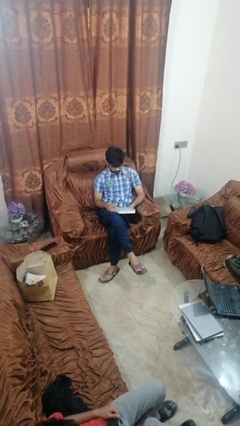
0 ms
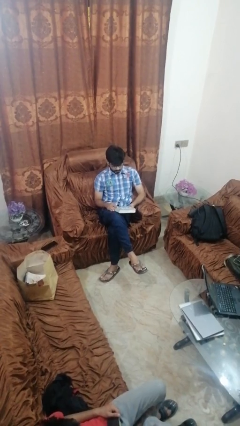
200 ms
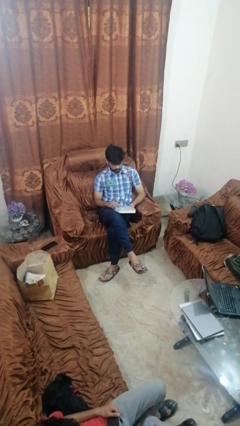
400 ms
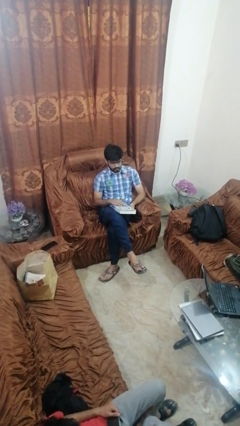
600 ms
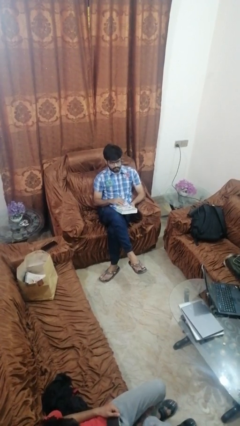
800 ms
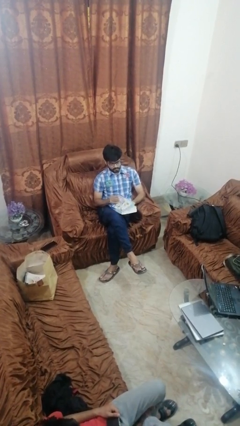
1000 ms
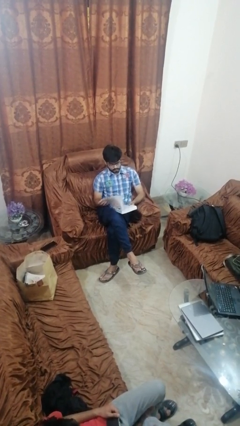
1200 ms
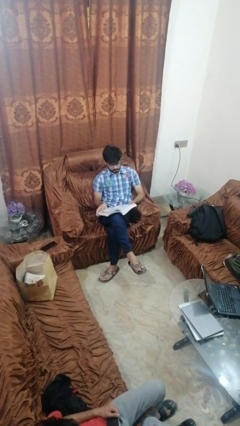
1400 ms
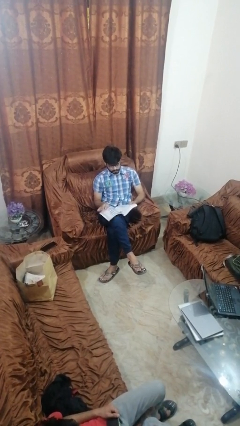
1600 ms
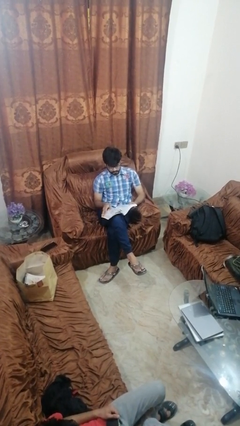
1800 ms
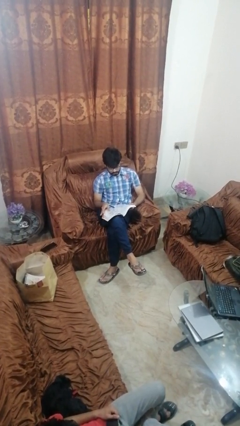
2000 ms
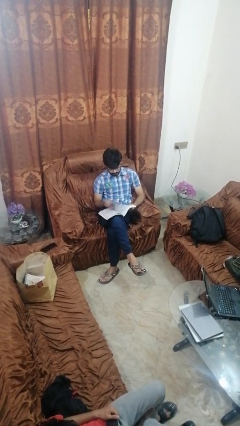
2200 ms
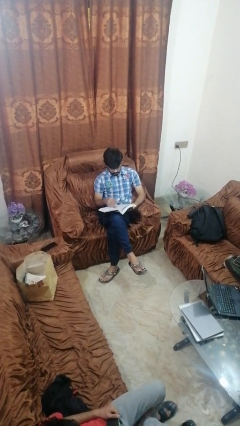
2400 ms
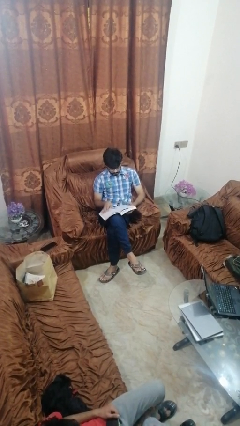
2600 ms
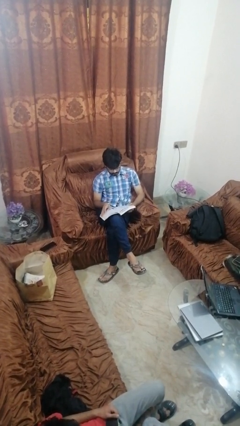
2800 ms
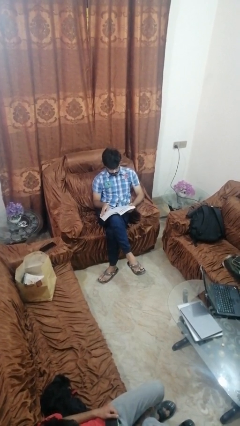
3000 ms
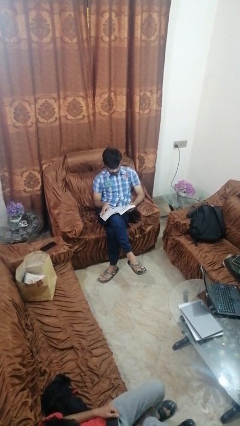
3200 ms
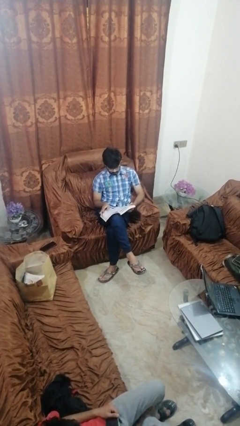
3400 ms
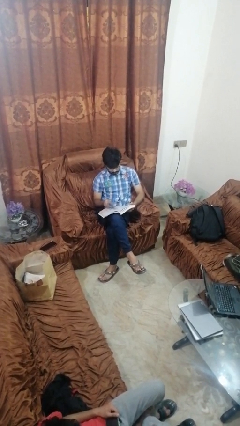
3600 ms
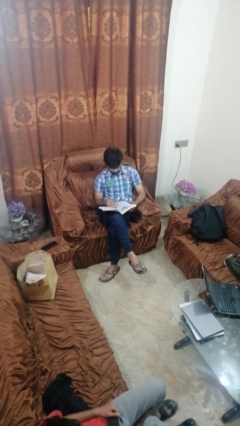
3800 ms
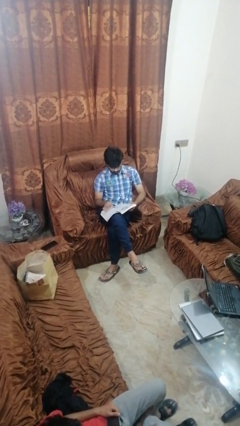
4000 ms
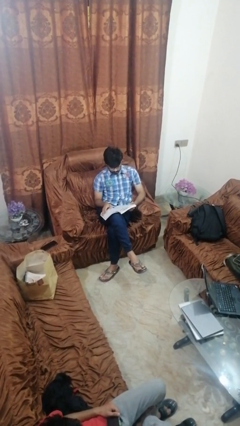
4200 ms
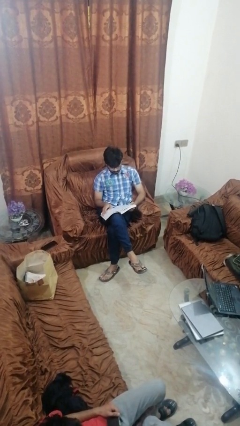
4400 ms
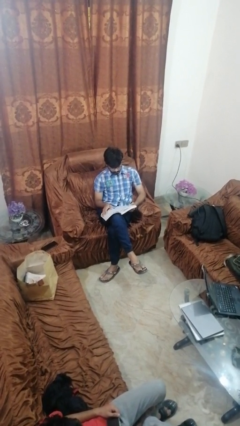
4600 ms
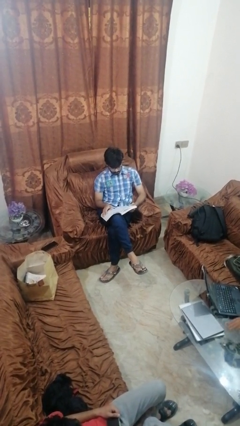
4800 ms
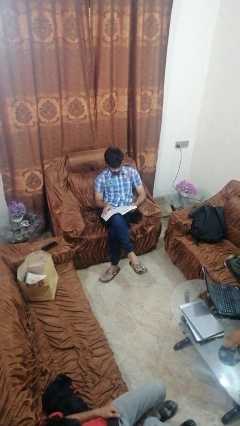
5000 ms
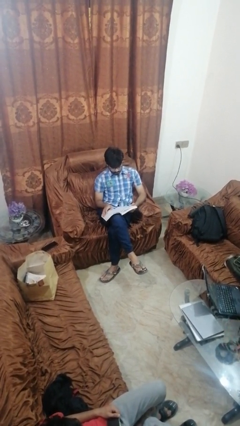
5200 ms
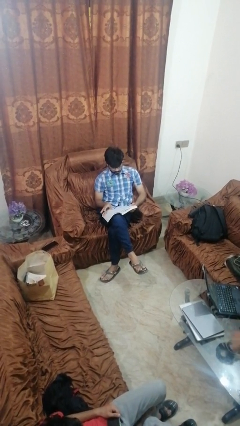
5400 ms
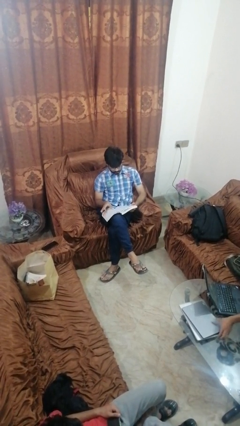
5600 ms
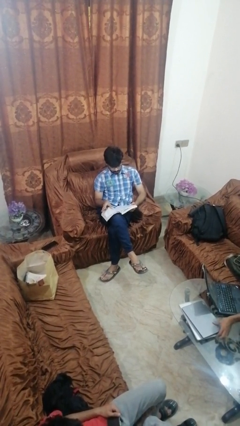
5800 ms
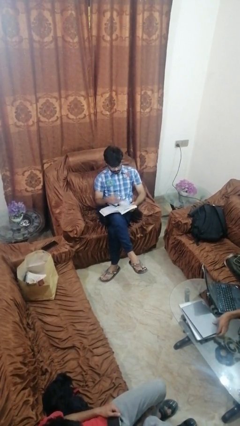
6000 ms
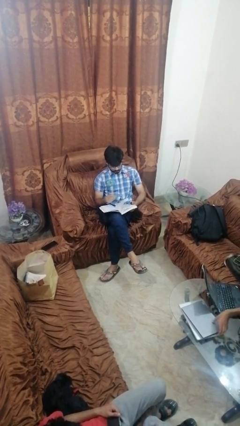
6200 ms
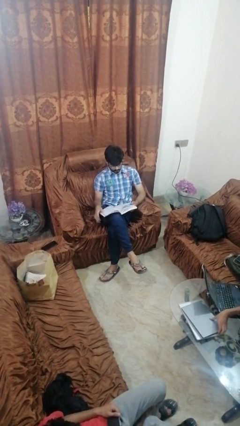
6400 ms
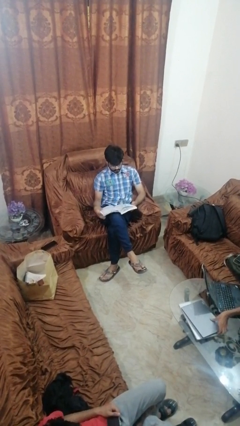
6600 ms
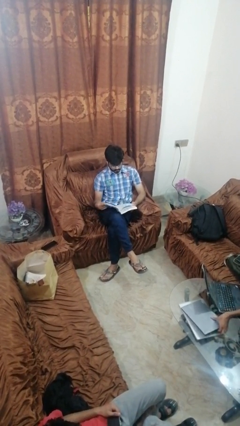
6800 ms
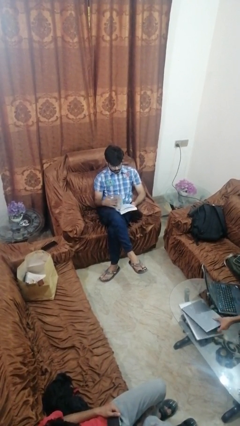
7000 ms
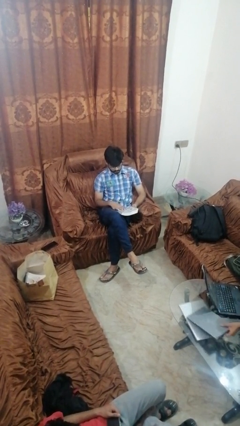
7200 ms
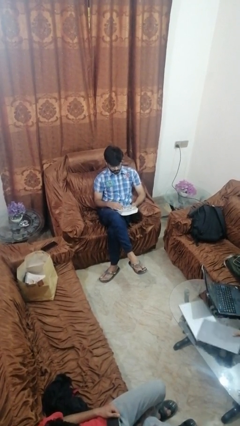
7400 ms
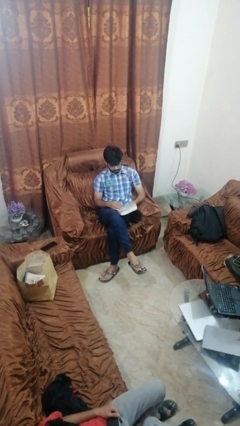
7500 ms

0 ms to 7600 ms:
person reads book

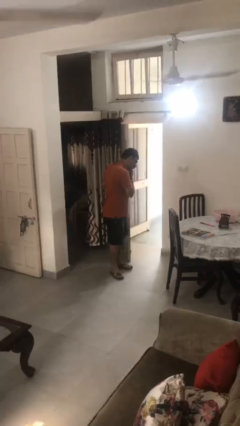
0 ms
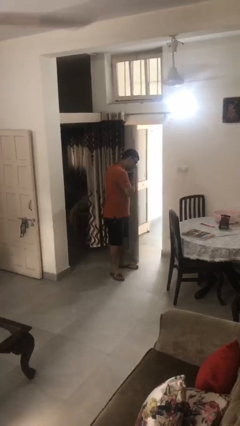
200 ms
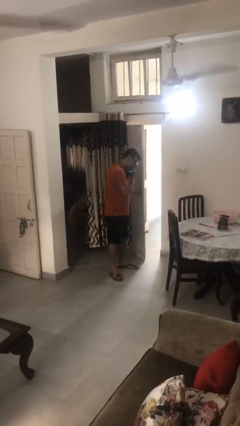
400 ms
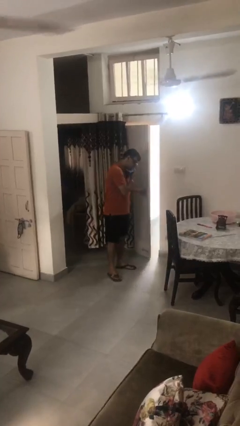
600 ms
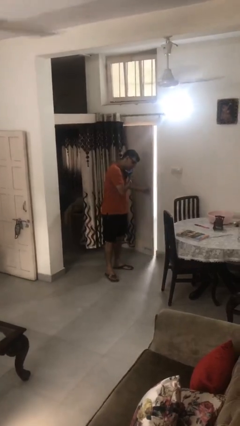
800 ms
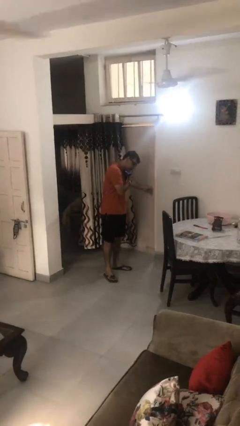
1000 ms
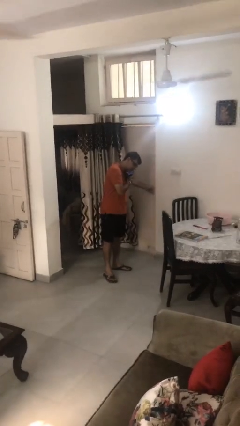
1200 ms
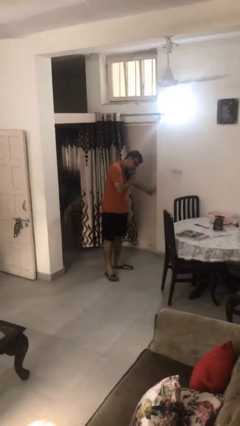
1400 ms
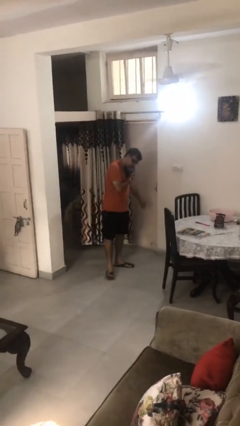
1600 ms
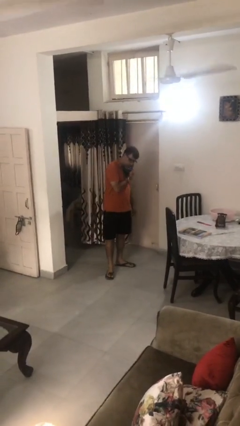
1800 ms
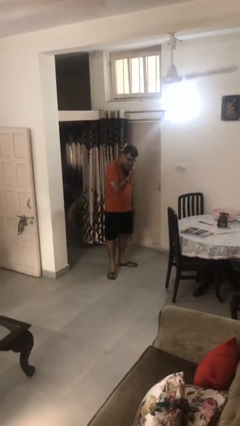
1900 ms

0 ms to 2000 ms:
person closes facility door

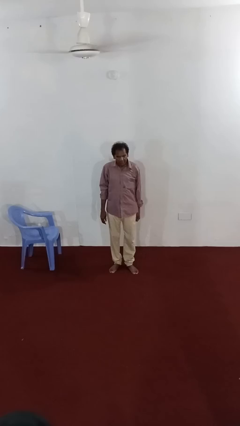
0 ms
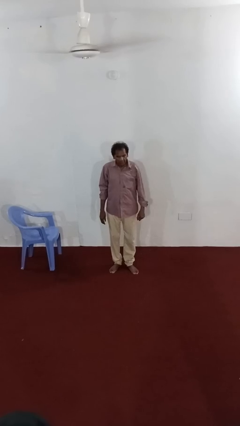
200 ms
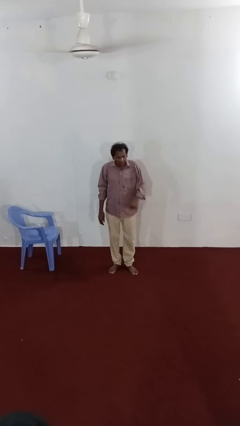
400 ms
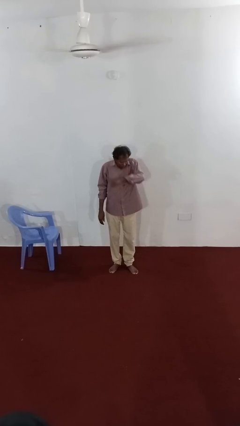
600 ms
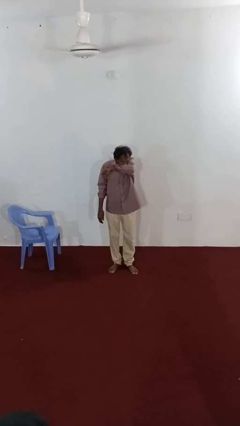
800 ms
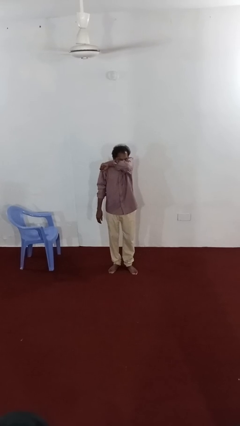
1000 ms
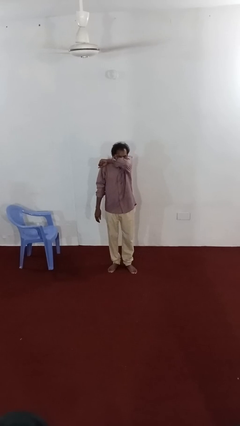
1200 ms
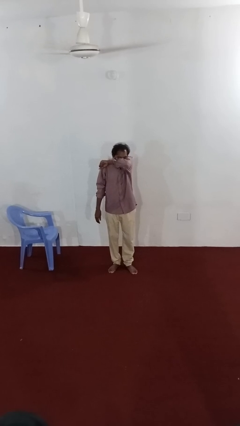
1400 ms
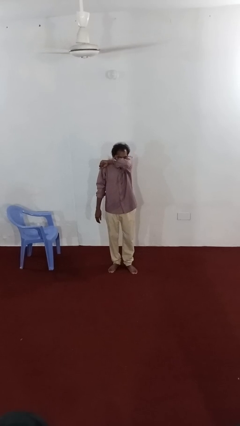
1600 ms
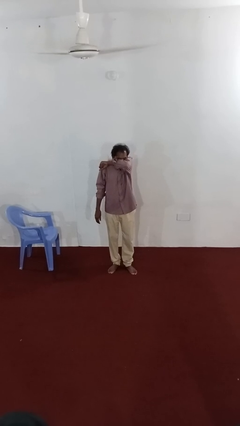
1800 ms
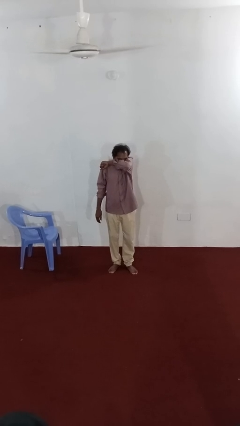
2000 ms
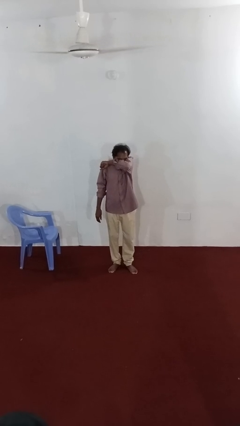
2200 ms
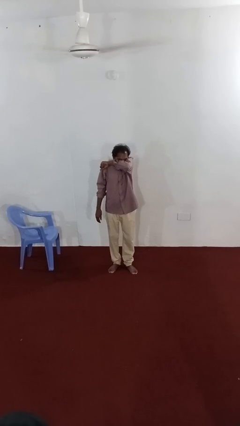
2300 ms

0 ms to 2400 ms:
person sneezes into arm

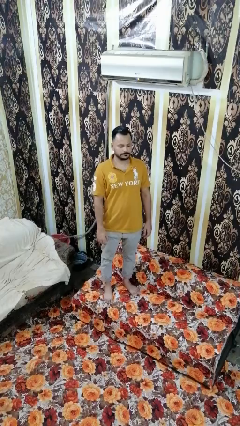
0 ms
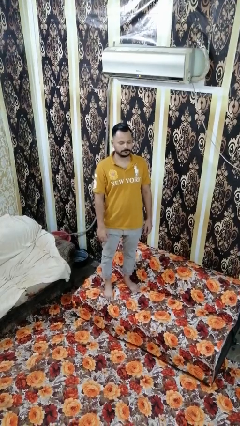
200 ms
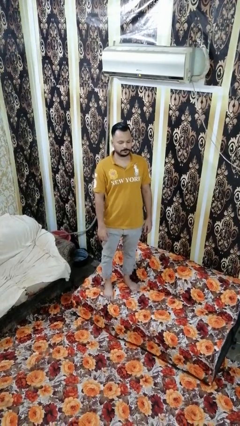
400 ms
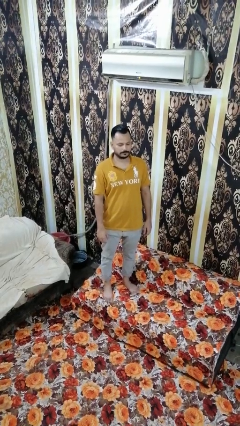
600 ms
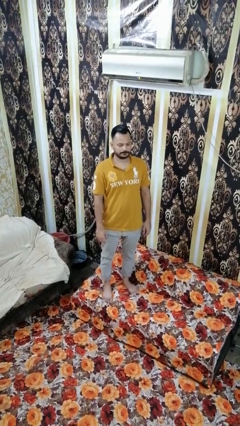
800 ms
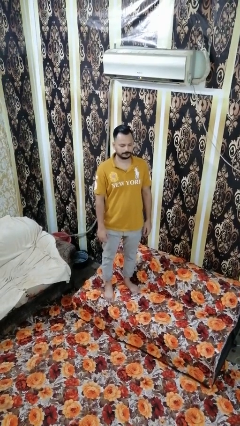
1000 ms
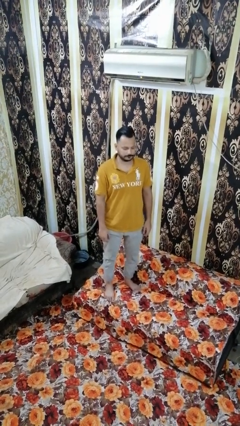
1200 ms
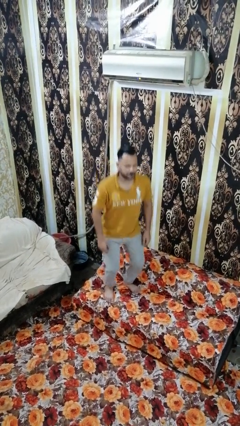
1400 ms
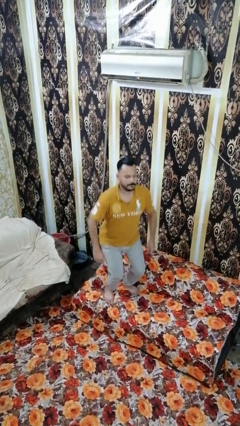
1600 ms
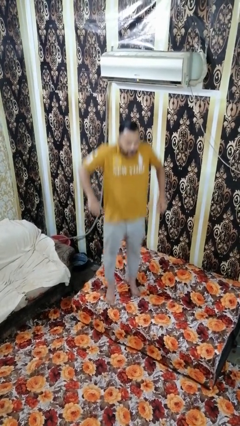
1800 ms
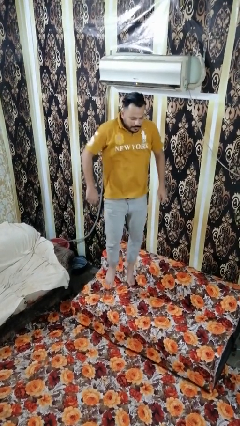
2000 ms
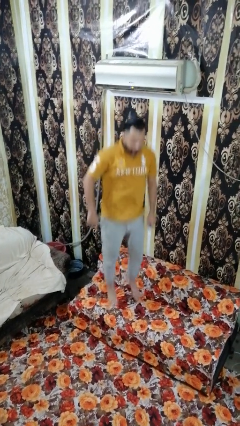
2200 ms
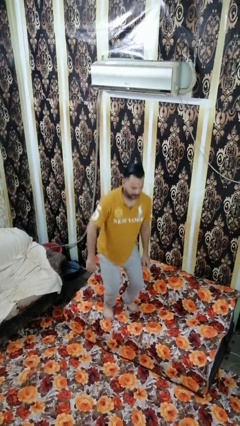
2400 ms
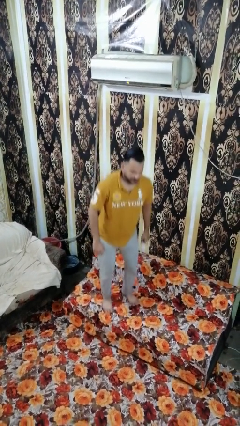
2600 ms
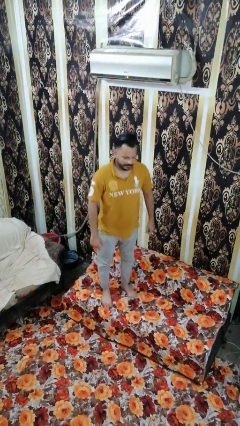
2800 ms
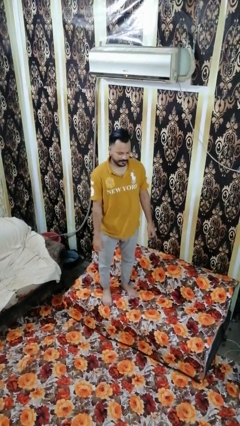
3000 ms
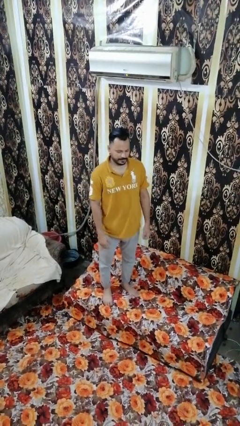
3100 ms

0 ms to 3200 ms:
person jumps on couch

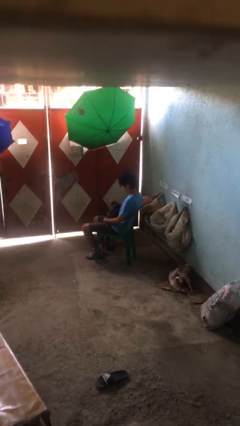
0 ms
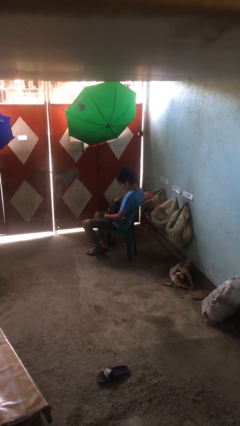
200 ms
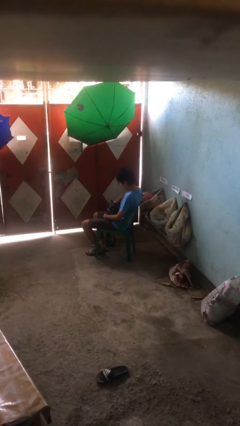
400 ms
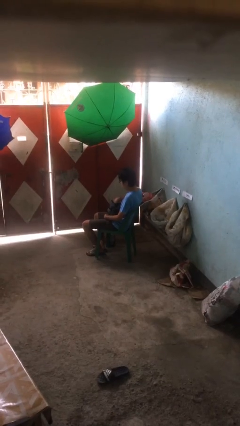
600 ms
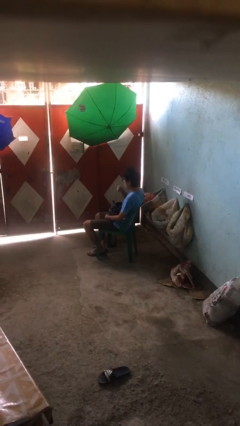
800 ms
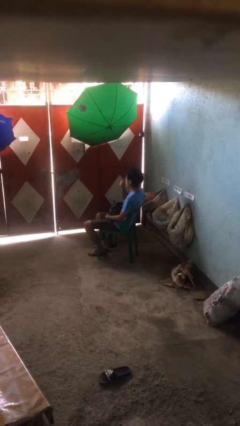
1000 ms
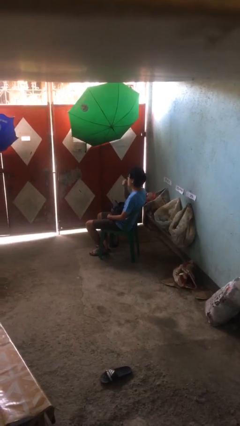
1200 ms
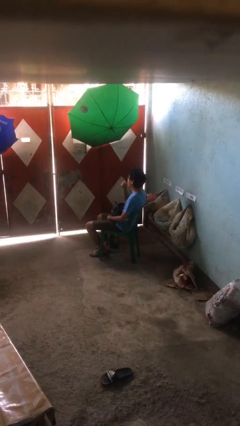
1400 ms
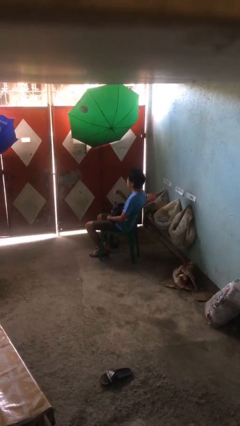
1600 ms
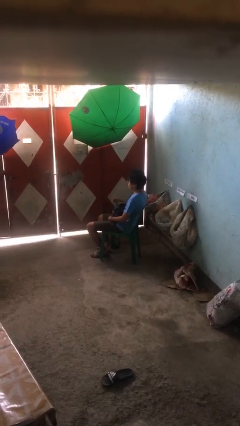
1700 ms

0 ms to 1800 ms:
person eats snack from bag
